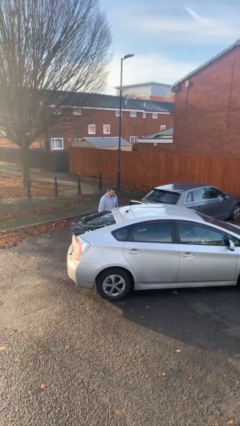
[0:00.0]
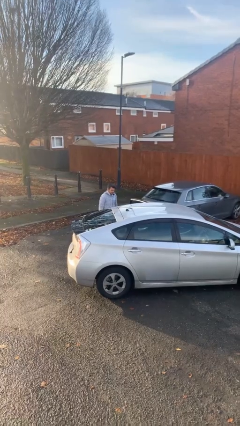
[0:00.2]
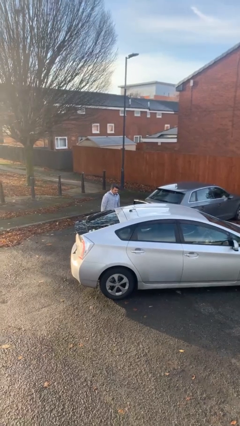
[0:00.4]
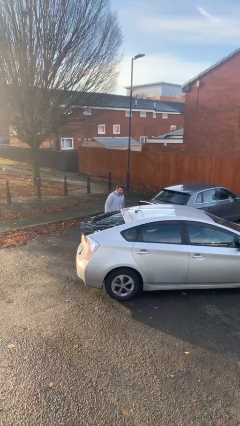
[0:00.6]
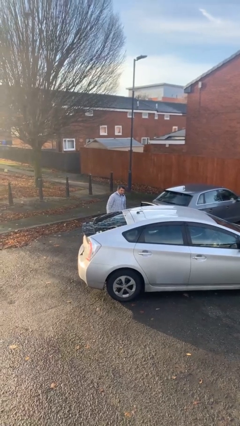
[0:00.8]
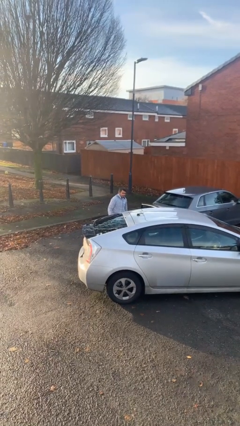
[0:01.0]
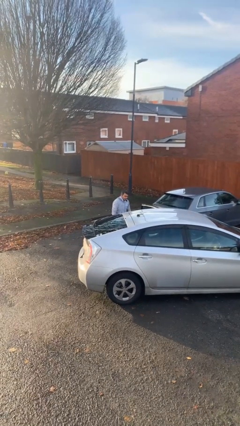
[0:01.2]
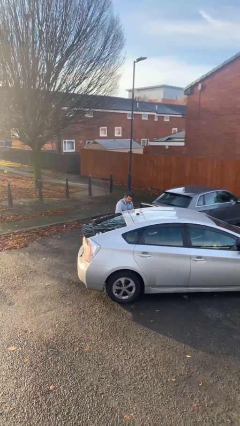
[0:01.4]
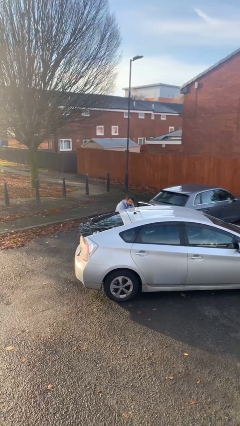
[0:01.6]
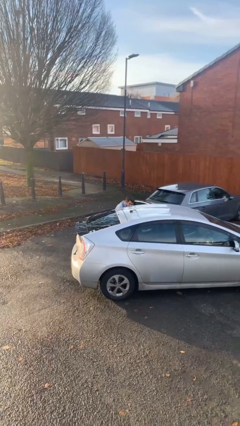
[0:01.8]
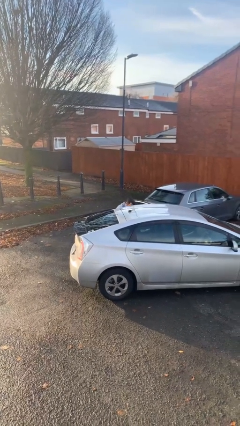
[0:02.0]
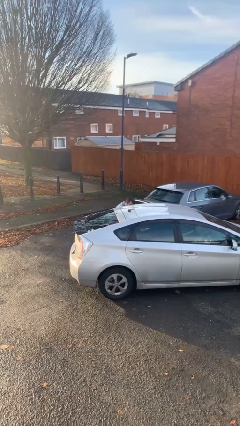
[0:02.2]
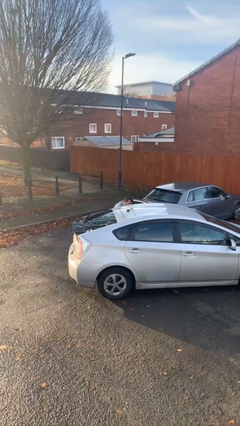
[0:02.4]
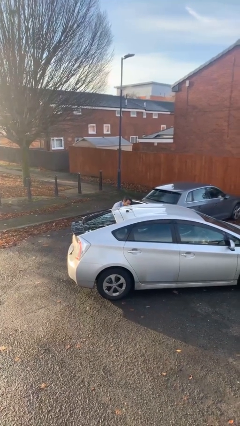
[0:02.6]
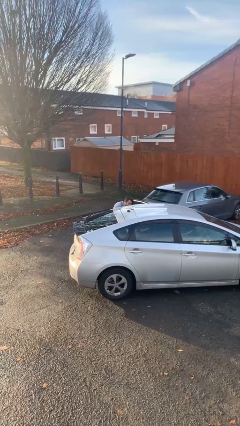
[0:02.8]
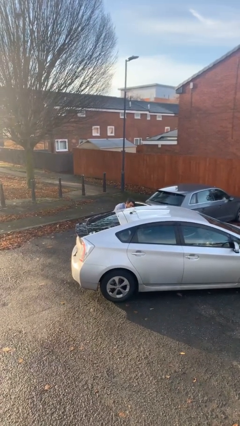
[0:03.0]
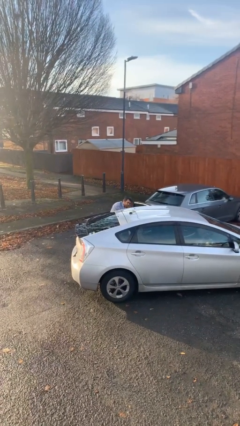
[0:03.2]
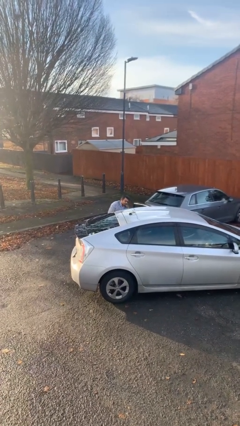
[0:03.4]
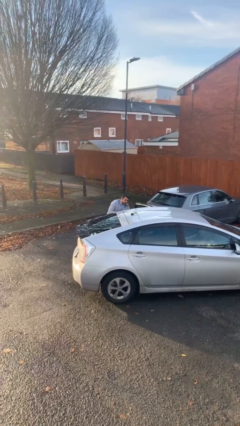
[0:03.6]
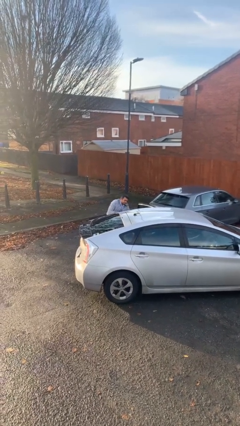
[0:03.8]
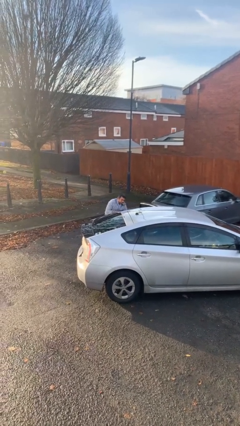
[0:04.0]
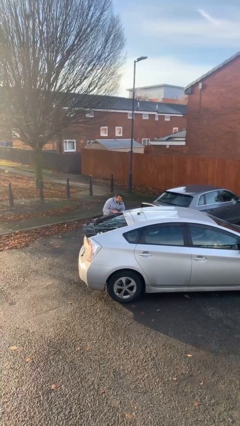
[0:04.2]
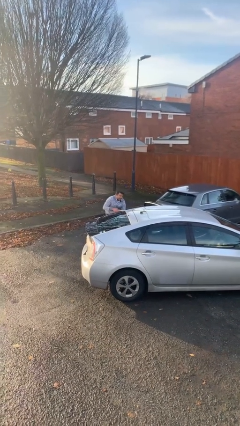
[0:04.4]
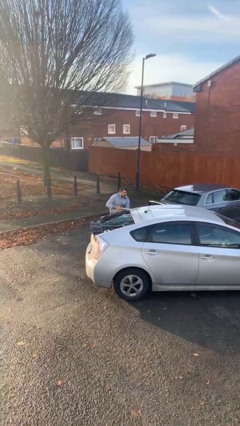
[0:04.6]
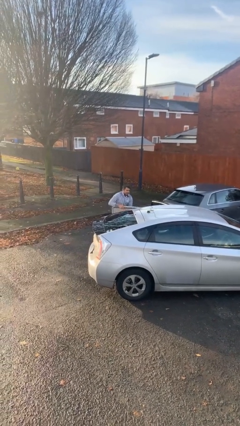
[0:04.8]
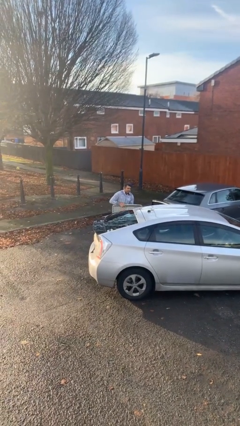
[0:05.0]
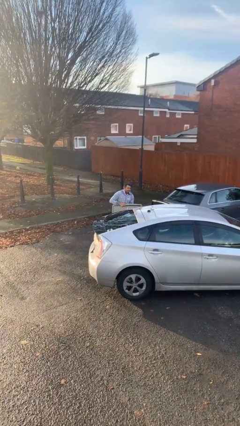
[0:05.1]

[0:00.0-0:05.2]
person unloads car

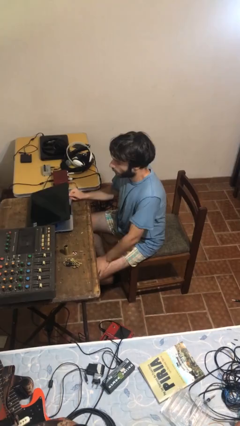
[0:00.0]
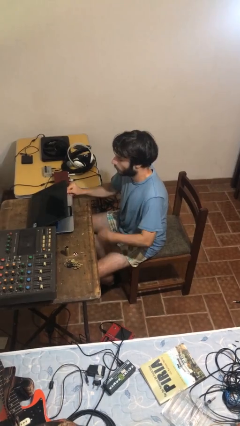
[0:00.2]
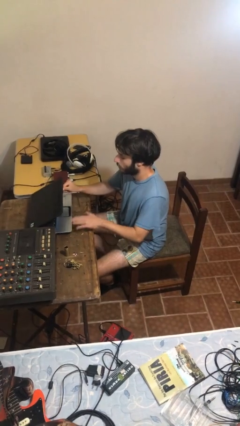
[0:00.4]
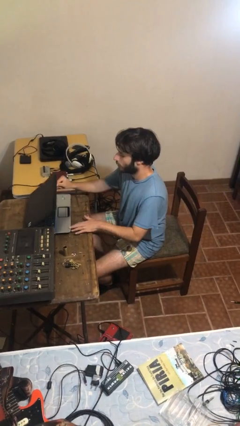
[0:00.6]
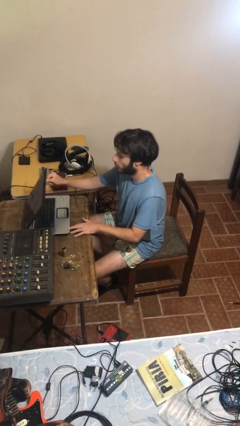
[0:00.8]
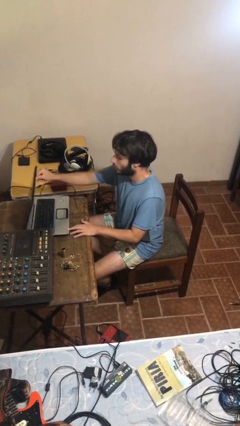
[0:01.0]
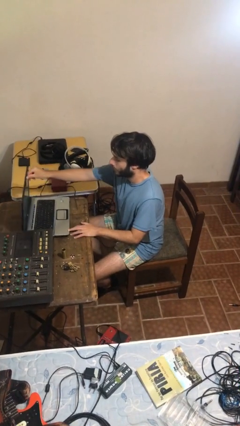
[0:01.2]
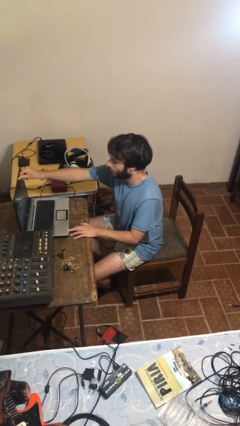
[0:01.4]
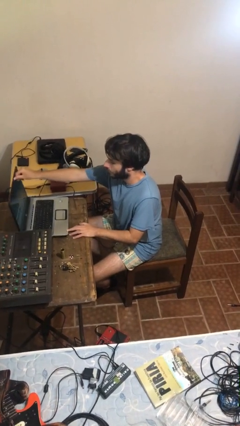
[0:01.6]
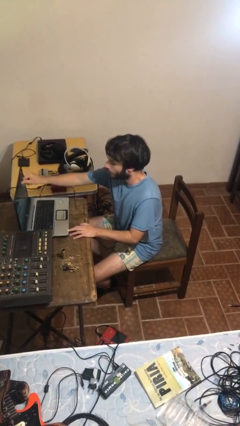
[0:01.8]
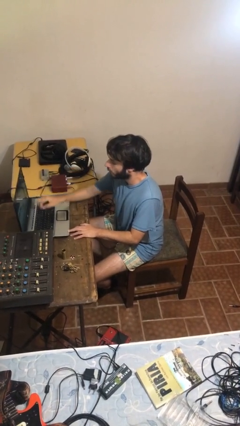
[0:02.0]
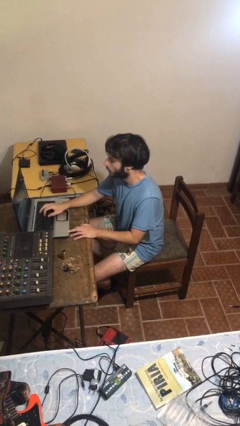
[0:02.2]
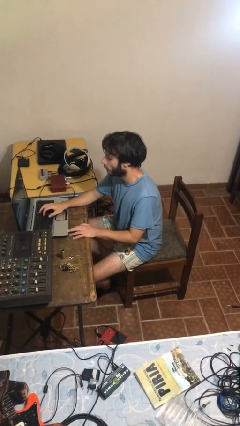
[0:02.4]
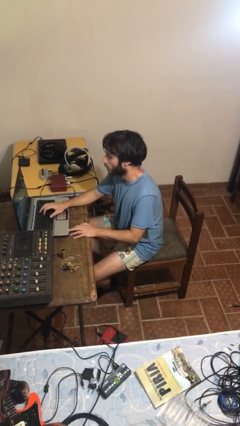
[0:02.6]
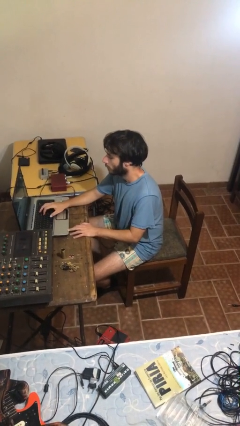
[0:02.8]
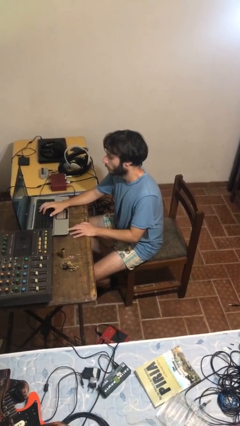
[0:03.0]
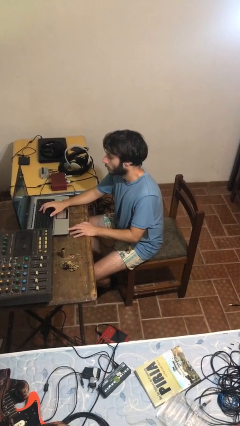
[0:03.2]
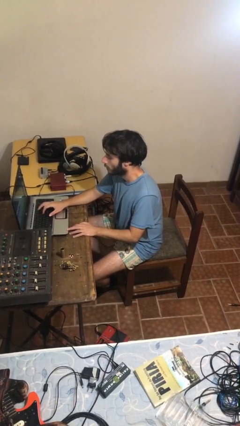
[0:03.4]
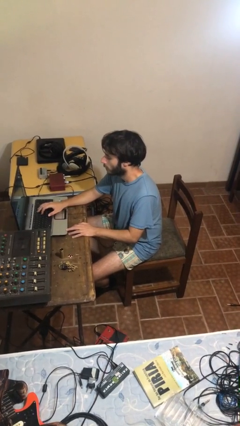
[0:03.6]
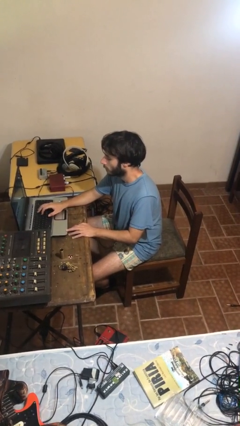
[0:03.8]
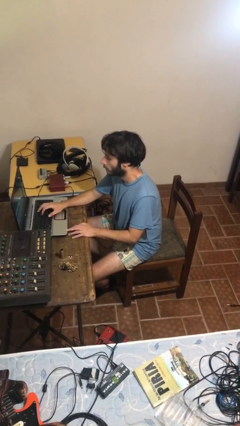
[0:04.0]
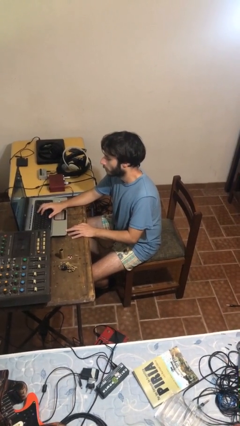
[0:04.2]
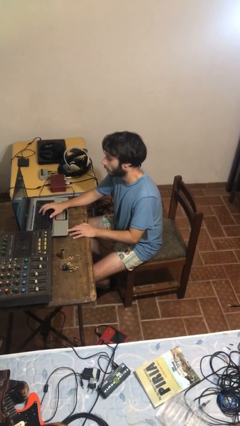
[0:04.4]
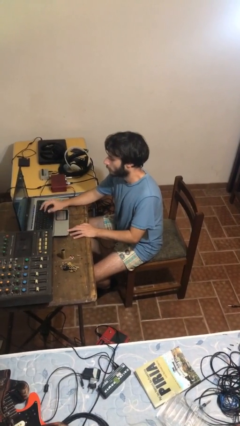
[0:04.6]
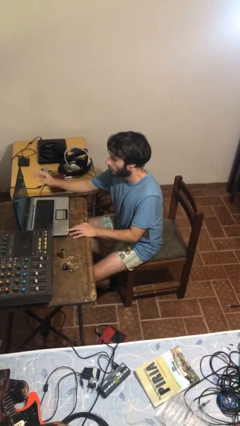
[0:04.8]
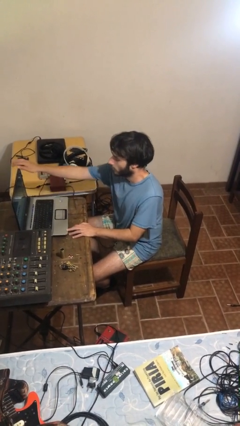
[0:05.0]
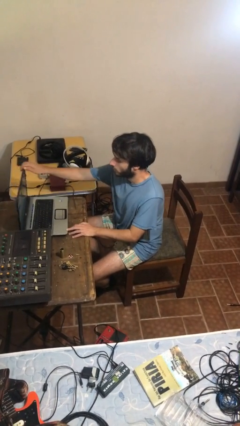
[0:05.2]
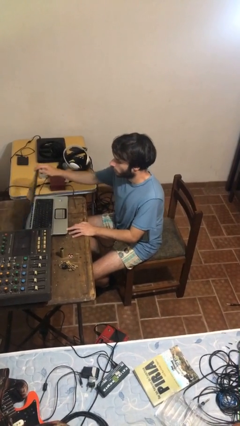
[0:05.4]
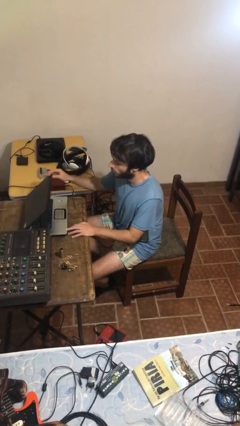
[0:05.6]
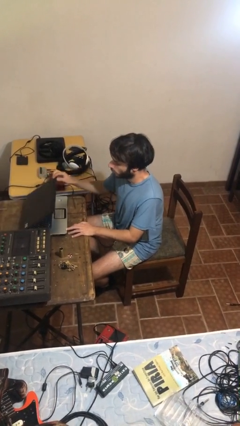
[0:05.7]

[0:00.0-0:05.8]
person interacts with laptop

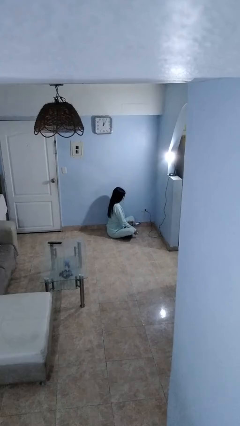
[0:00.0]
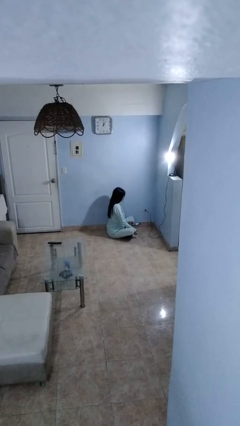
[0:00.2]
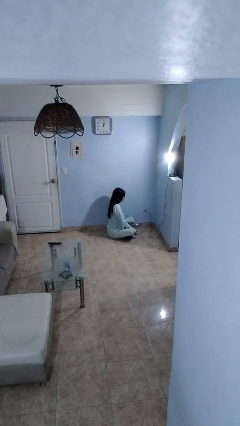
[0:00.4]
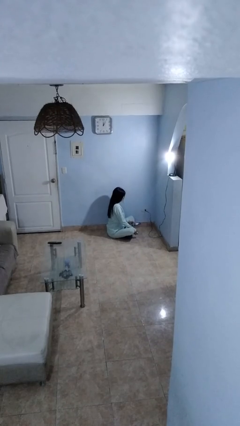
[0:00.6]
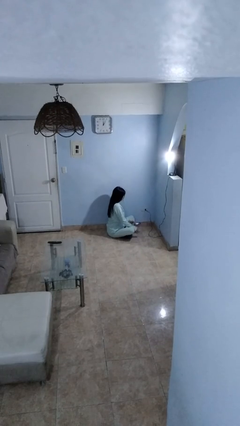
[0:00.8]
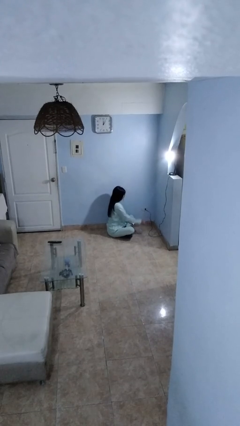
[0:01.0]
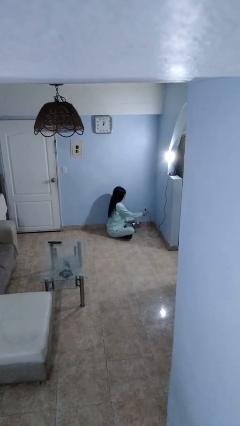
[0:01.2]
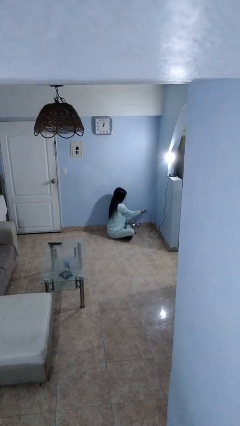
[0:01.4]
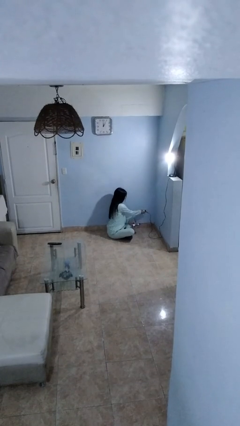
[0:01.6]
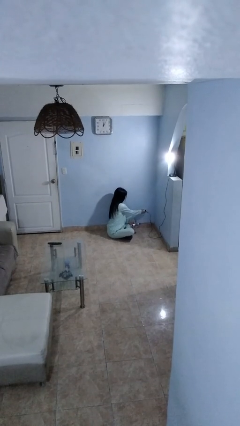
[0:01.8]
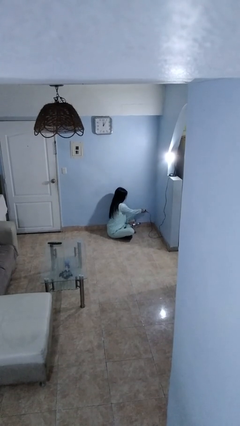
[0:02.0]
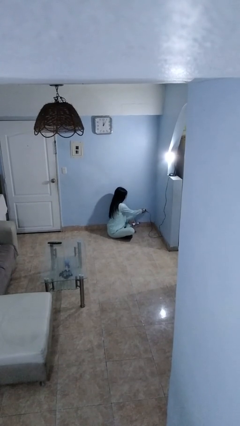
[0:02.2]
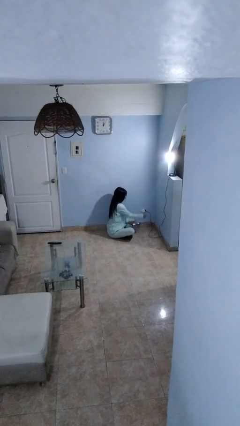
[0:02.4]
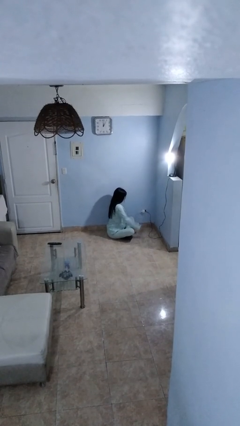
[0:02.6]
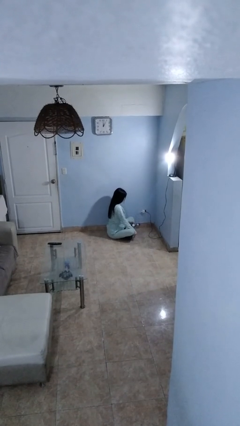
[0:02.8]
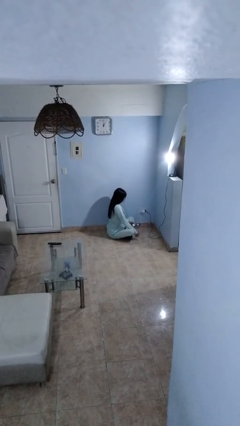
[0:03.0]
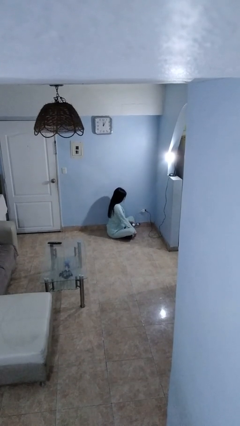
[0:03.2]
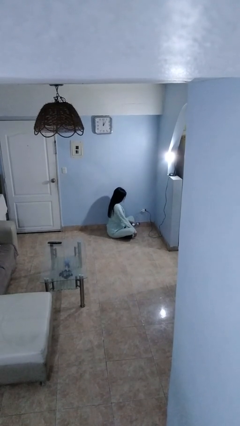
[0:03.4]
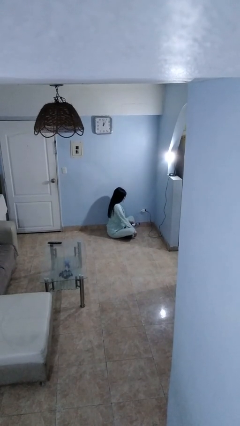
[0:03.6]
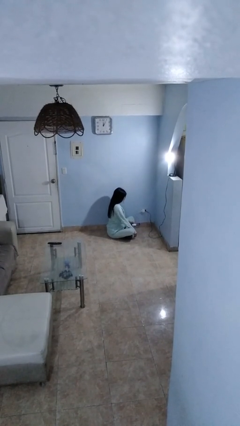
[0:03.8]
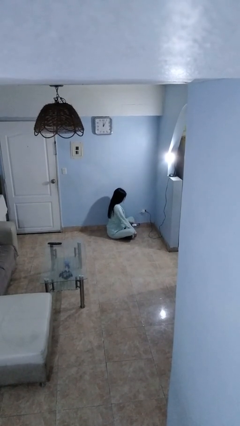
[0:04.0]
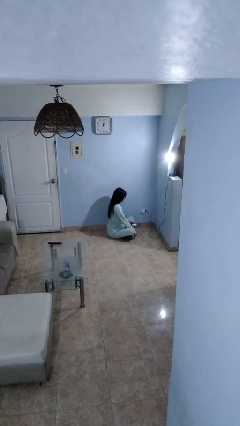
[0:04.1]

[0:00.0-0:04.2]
person plugs into electrical socket

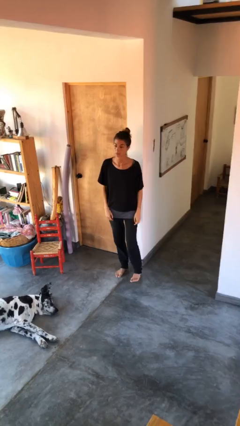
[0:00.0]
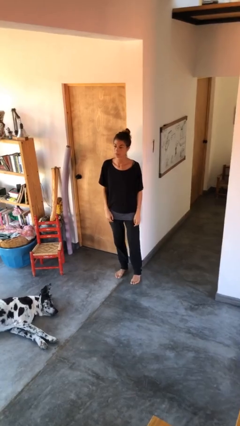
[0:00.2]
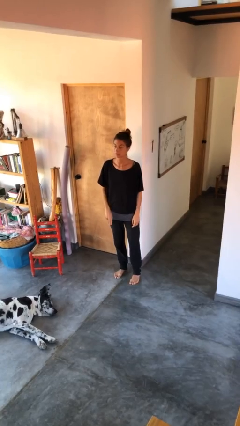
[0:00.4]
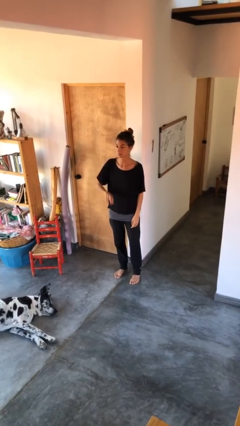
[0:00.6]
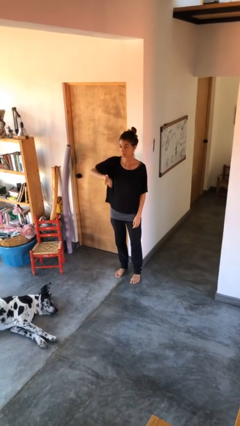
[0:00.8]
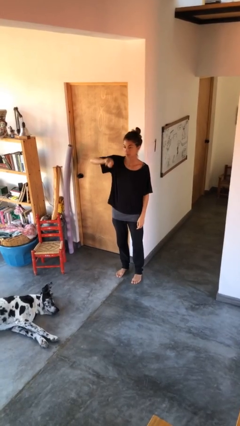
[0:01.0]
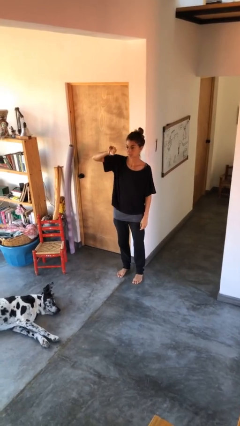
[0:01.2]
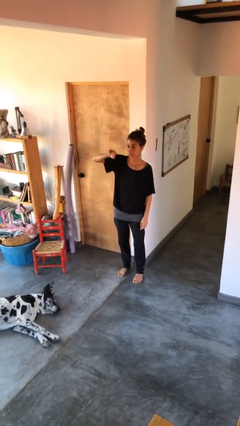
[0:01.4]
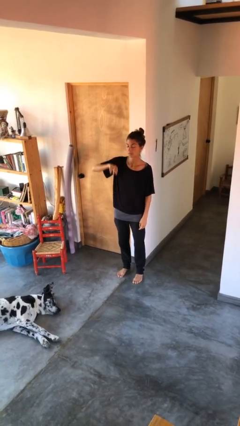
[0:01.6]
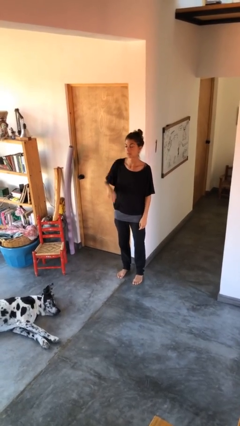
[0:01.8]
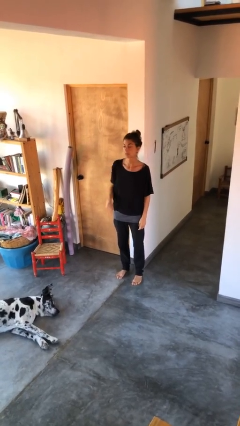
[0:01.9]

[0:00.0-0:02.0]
person gestures swipe up

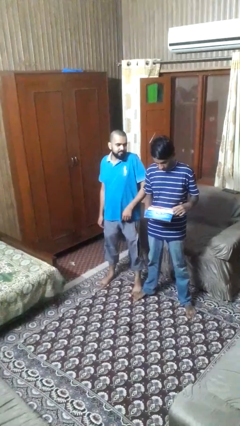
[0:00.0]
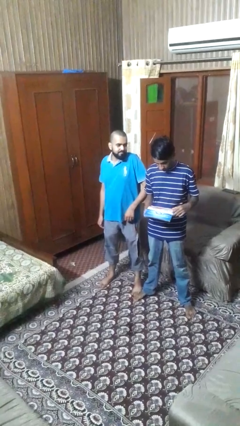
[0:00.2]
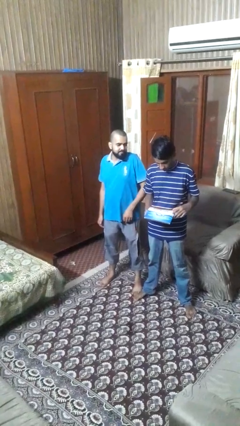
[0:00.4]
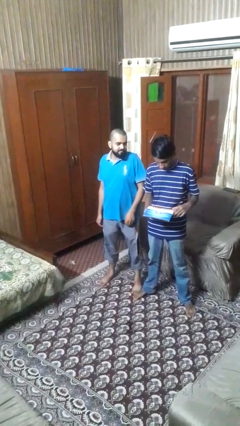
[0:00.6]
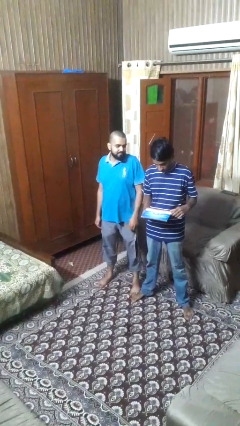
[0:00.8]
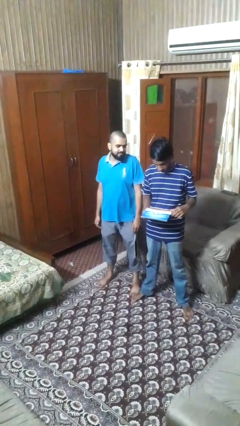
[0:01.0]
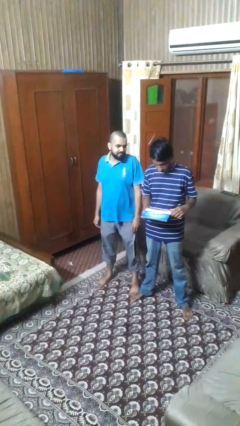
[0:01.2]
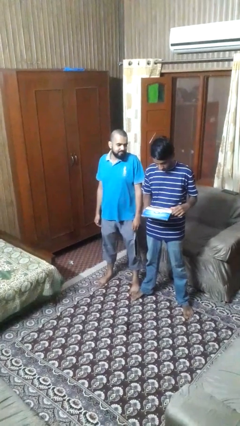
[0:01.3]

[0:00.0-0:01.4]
person nudges person with elbow
